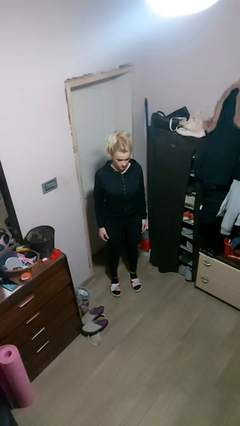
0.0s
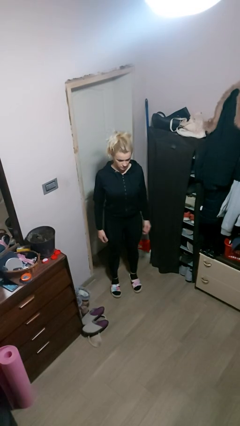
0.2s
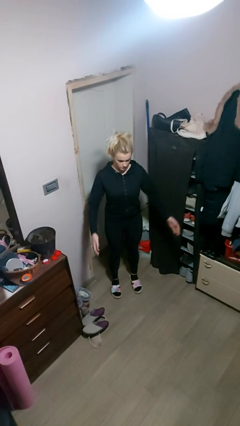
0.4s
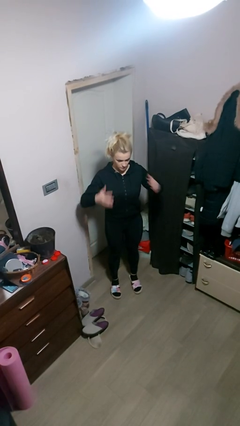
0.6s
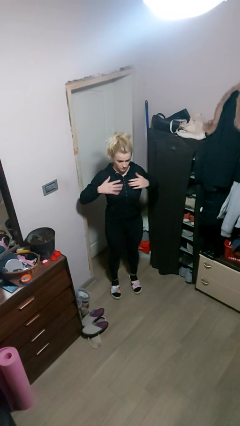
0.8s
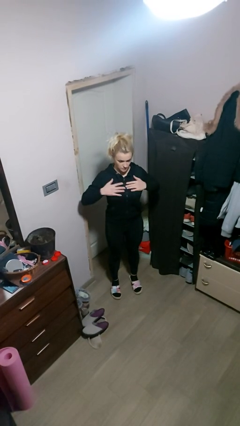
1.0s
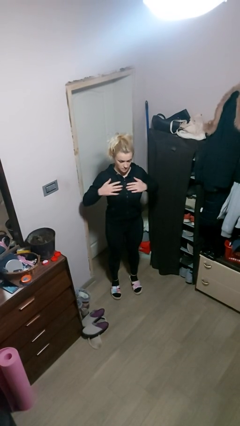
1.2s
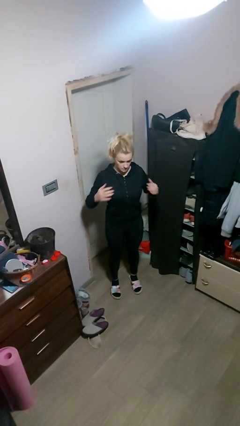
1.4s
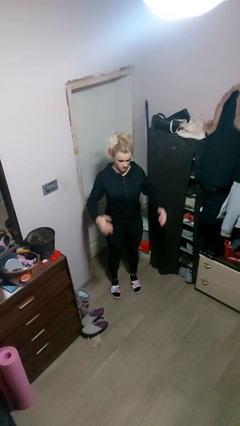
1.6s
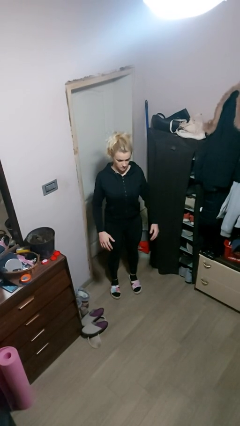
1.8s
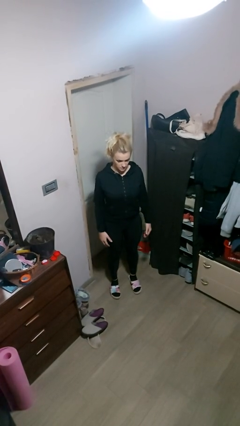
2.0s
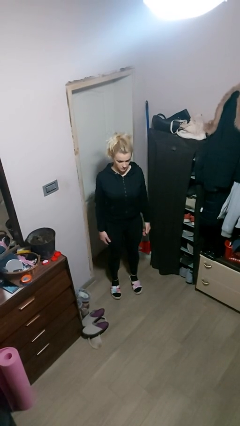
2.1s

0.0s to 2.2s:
person drums on chest

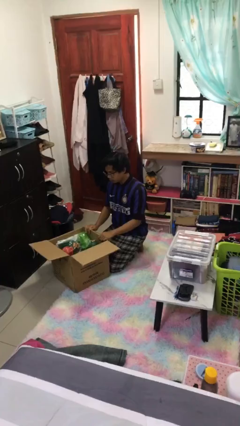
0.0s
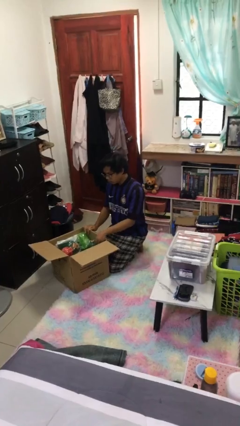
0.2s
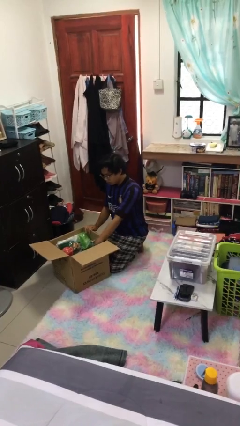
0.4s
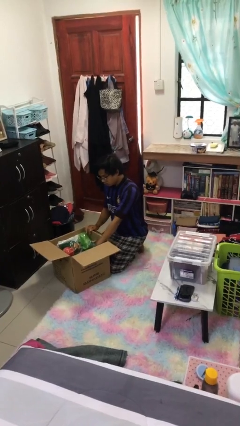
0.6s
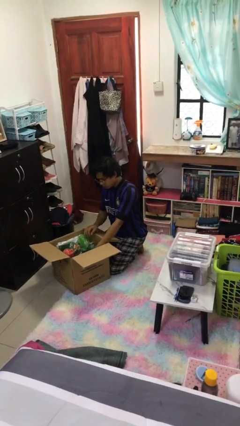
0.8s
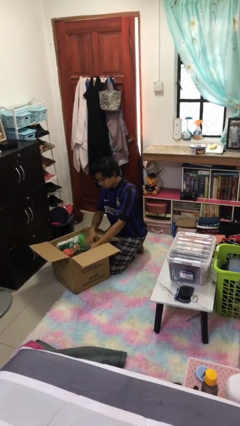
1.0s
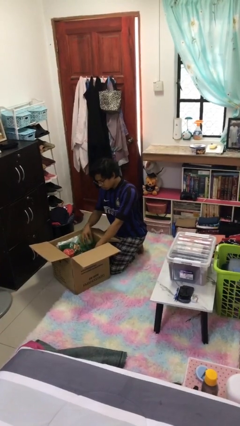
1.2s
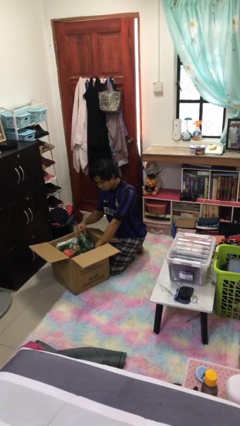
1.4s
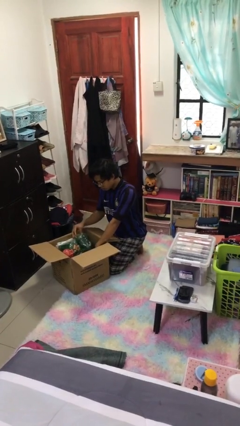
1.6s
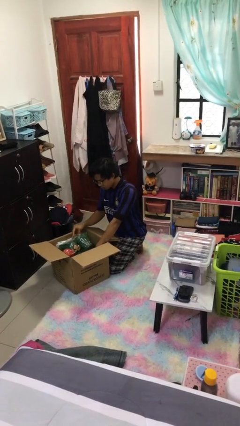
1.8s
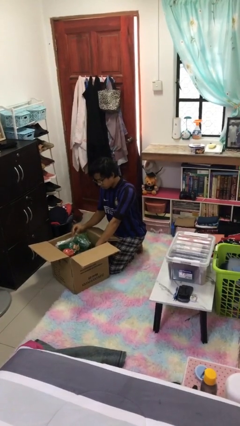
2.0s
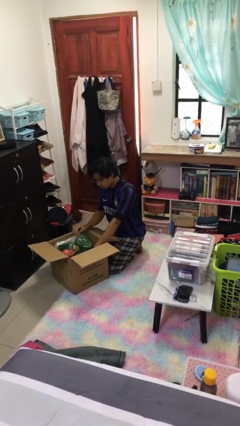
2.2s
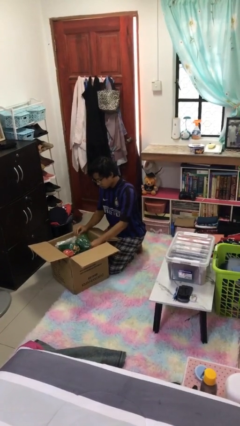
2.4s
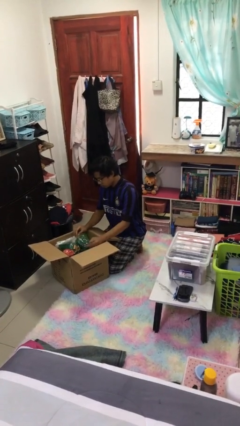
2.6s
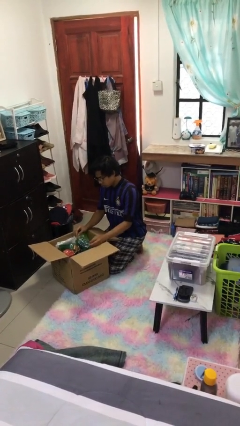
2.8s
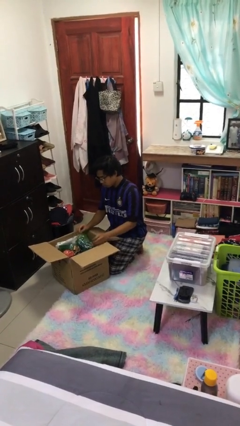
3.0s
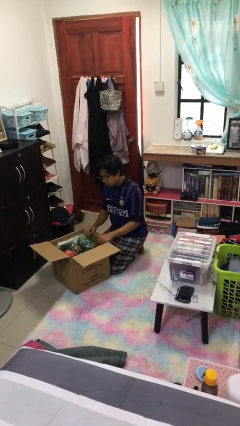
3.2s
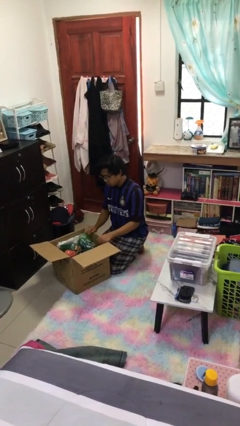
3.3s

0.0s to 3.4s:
person searches in box

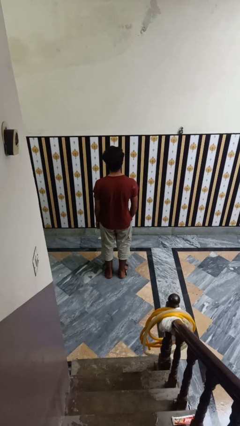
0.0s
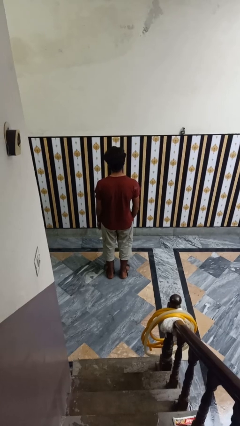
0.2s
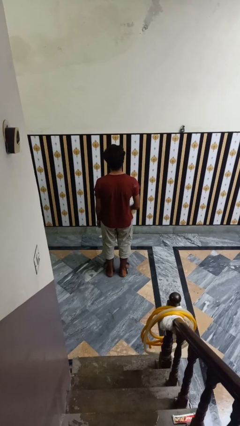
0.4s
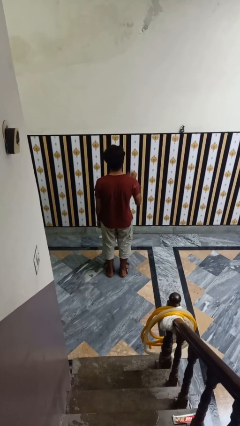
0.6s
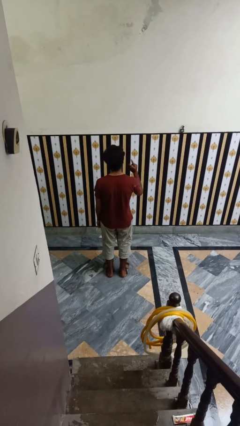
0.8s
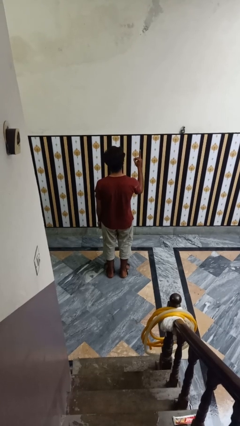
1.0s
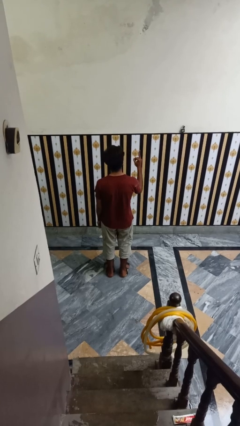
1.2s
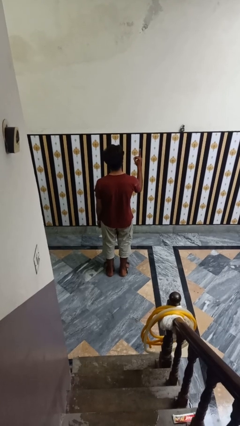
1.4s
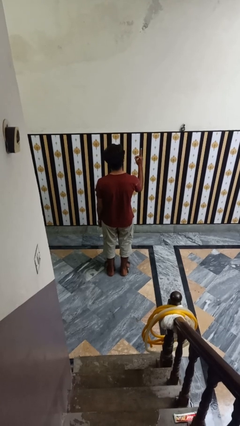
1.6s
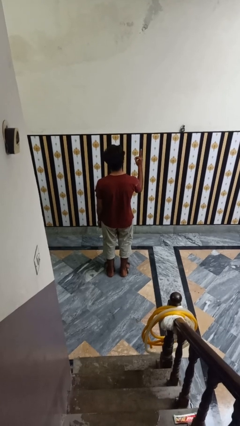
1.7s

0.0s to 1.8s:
person gestures number one

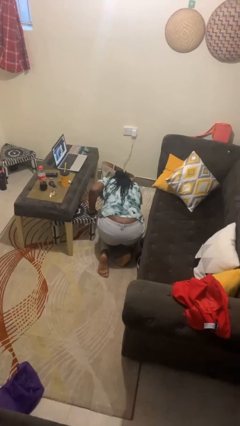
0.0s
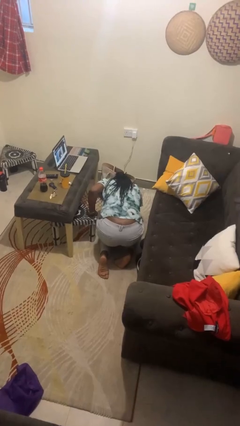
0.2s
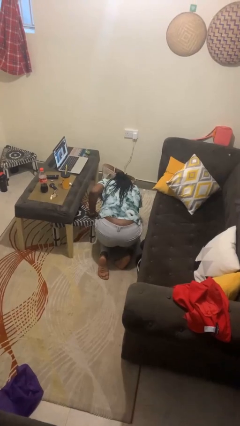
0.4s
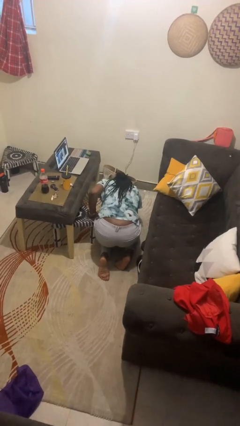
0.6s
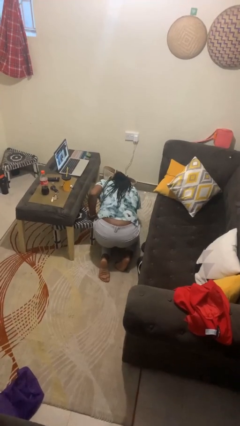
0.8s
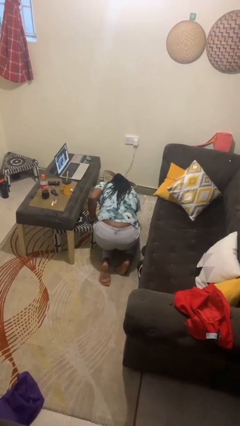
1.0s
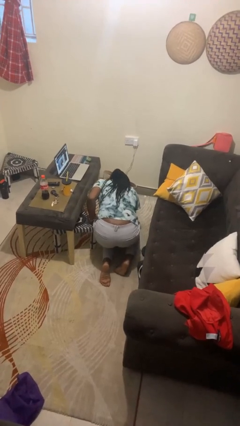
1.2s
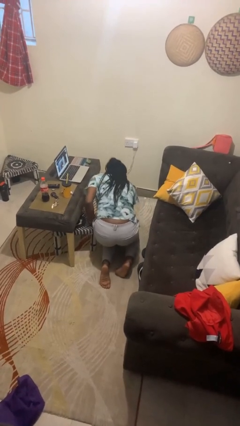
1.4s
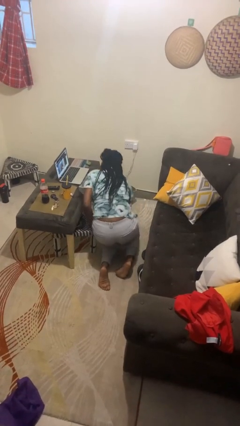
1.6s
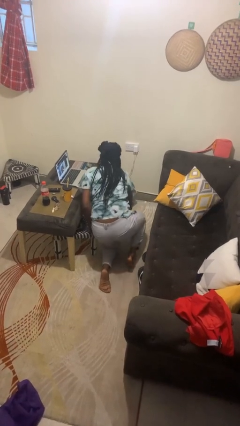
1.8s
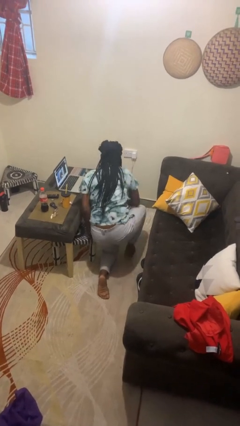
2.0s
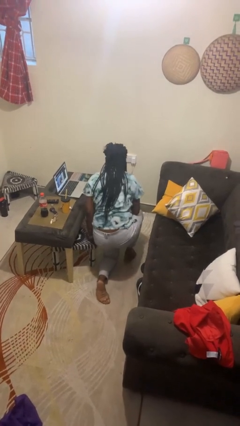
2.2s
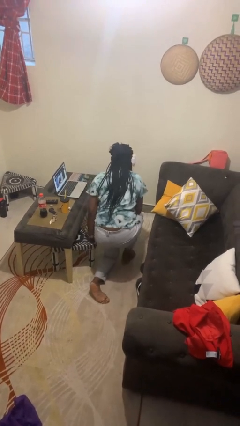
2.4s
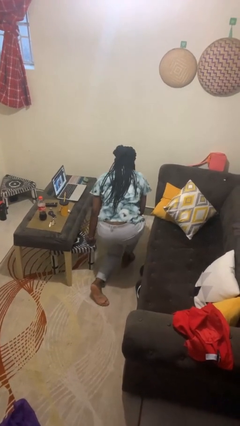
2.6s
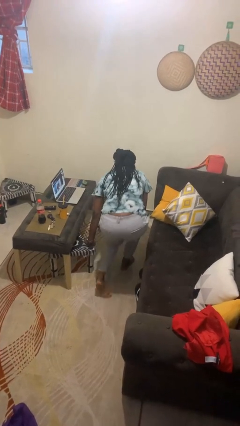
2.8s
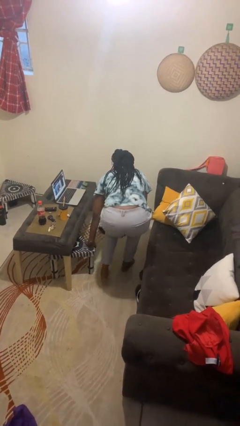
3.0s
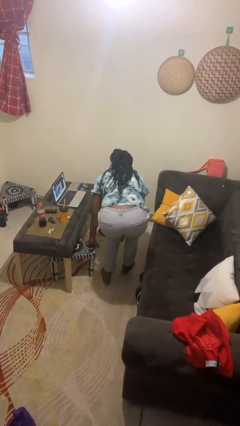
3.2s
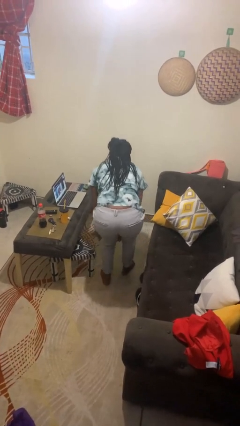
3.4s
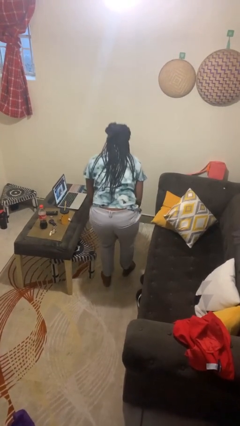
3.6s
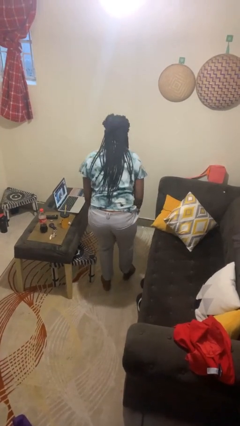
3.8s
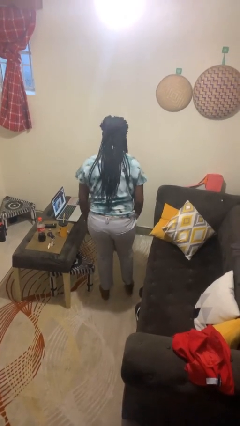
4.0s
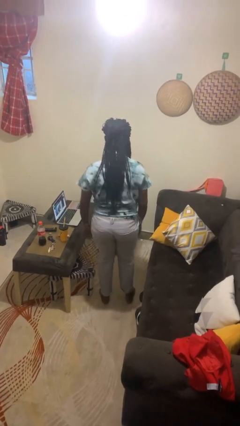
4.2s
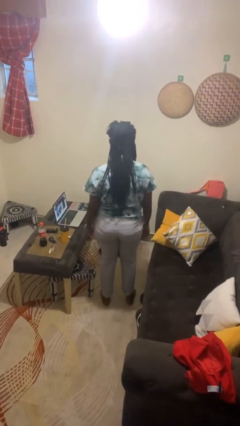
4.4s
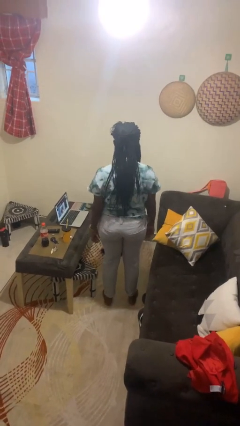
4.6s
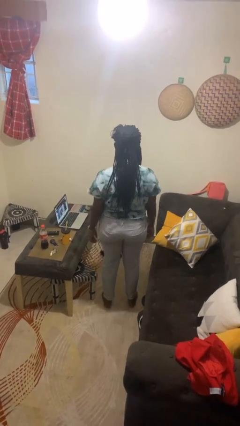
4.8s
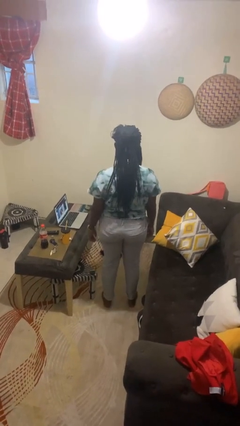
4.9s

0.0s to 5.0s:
person stands up from floor

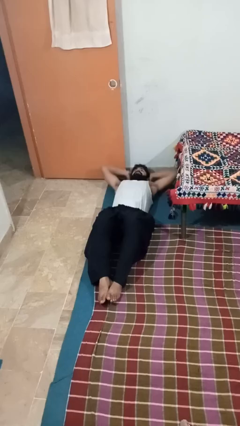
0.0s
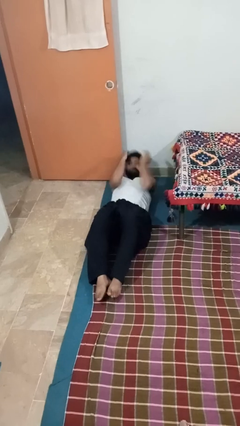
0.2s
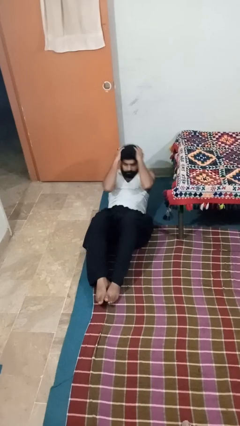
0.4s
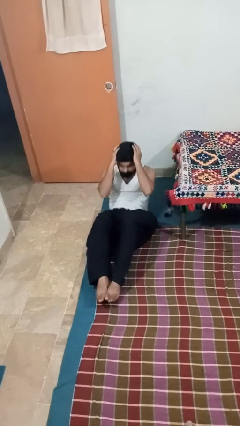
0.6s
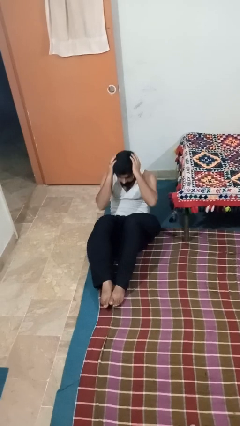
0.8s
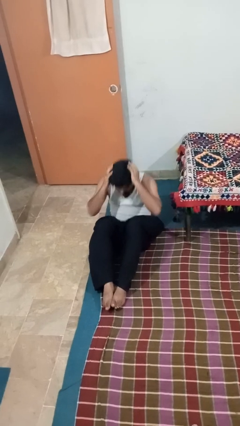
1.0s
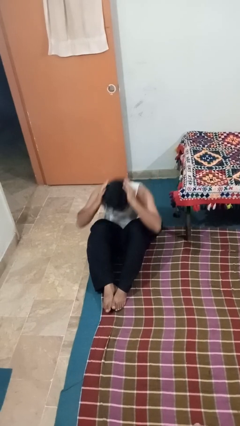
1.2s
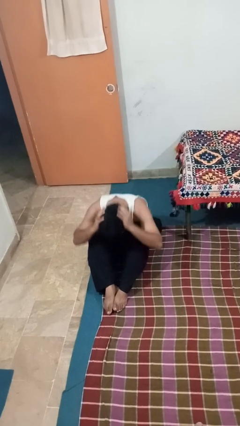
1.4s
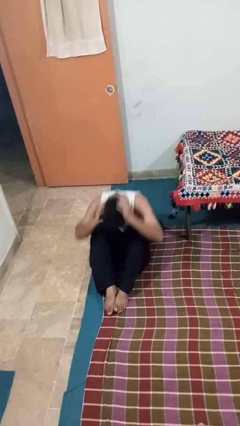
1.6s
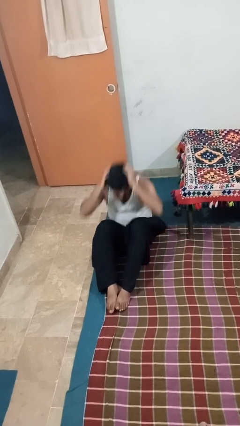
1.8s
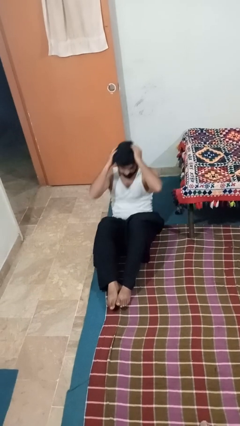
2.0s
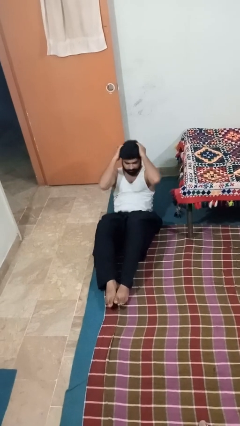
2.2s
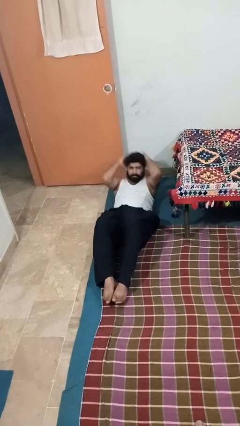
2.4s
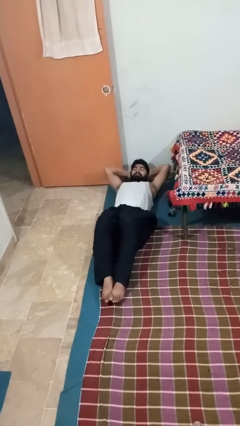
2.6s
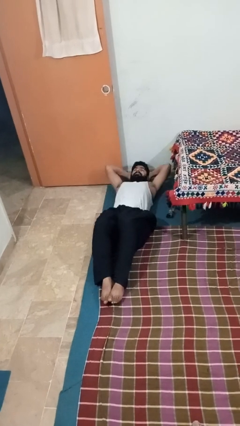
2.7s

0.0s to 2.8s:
person exercises with situp

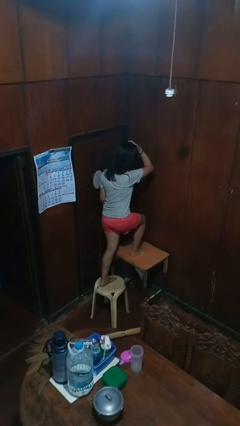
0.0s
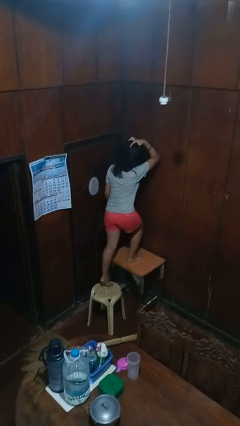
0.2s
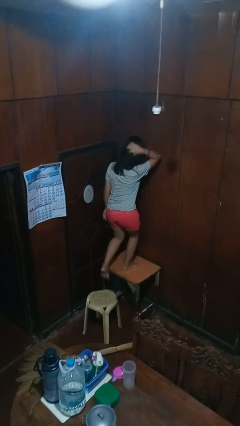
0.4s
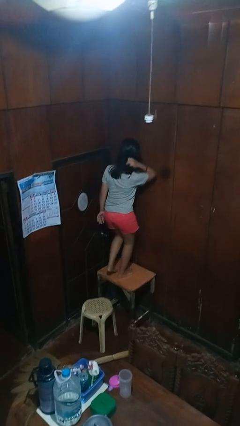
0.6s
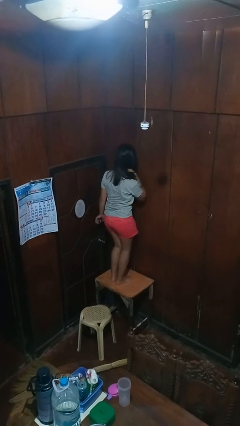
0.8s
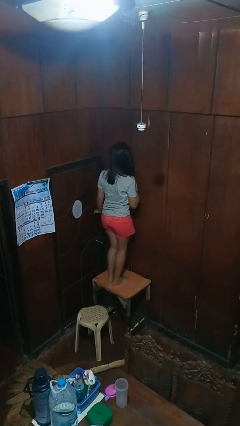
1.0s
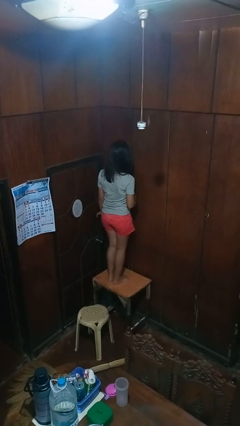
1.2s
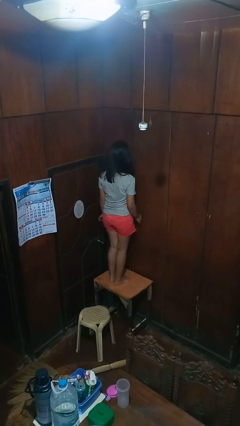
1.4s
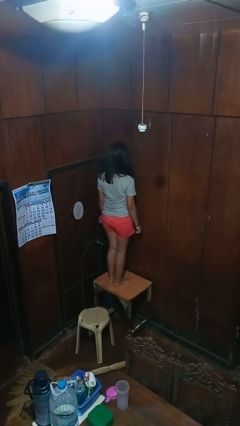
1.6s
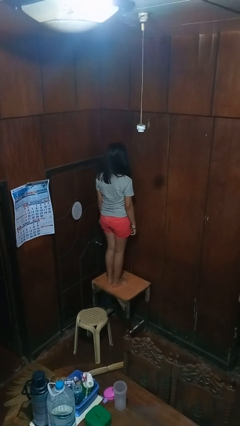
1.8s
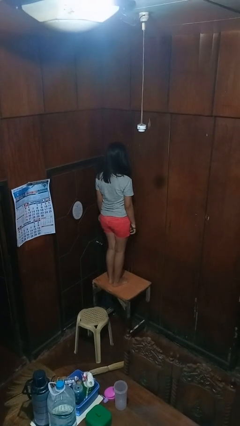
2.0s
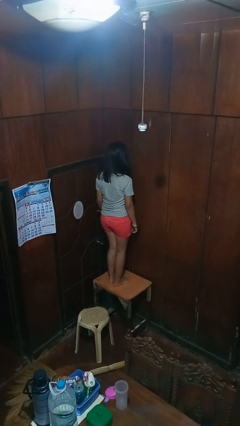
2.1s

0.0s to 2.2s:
person climbs on table
